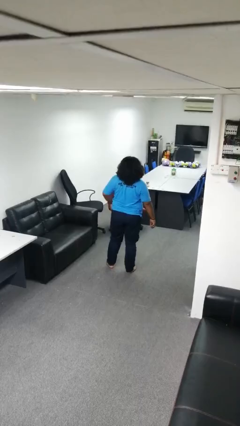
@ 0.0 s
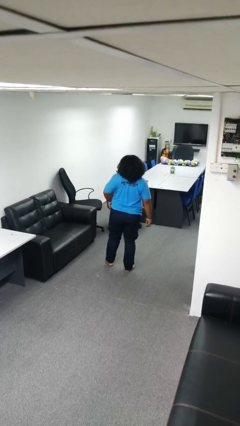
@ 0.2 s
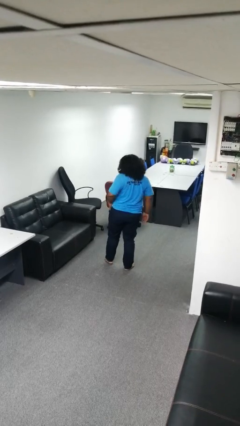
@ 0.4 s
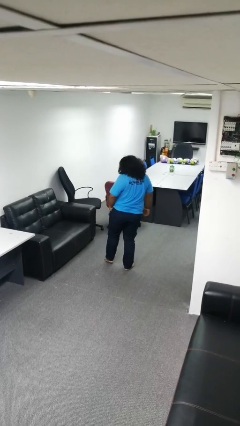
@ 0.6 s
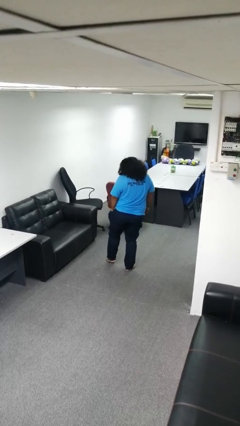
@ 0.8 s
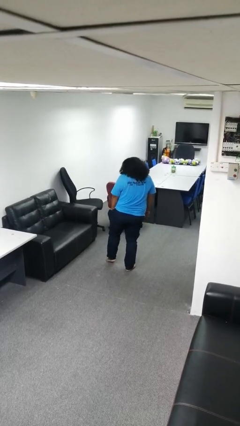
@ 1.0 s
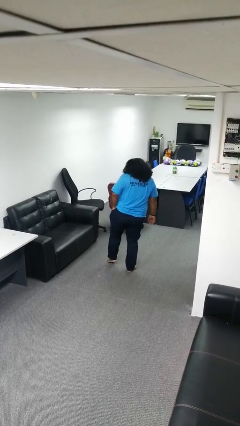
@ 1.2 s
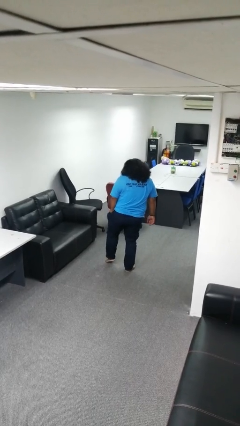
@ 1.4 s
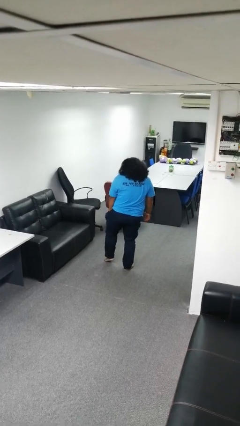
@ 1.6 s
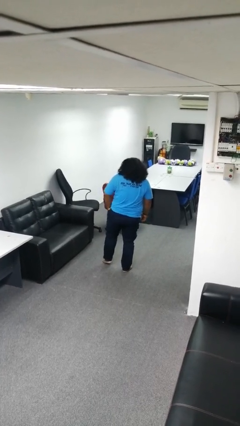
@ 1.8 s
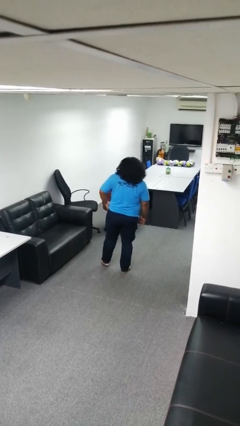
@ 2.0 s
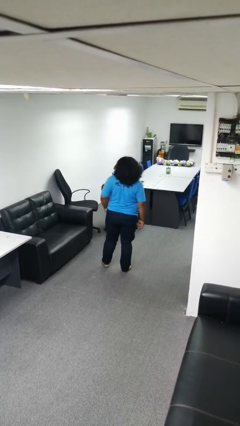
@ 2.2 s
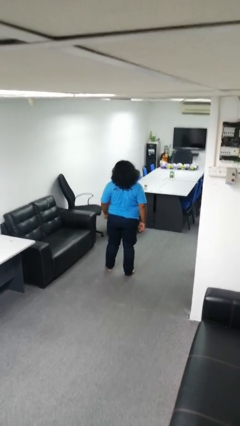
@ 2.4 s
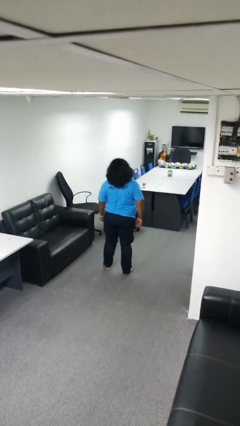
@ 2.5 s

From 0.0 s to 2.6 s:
person puts hands in back pockets

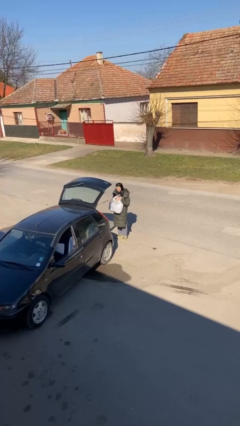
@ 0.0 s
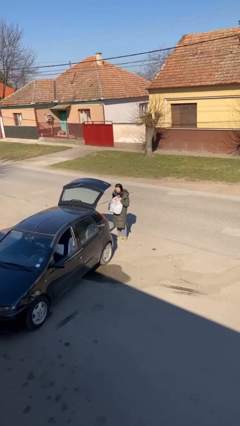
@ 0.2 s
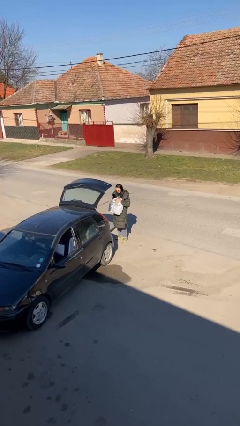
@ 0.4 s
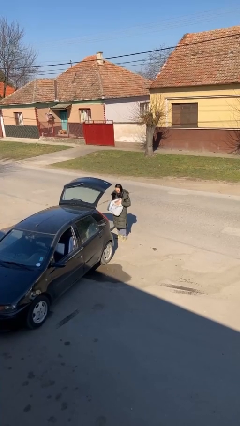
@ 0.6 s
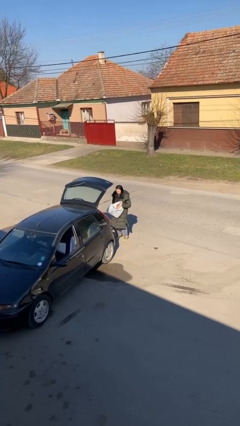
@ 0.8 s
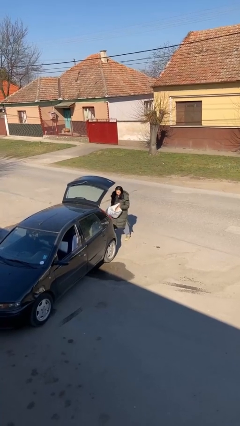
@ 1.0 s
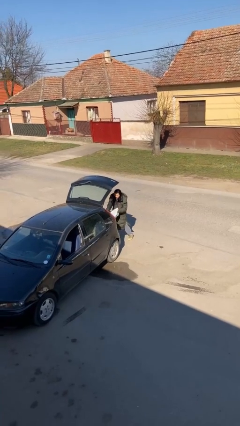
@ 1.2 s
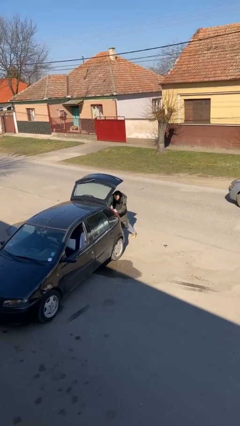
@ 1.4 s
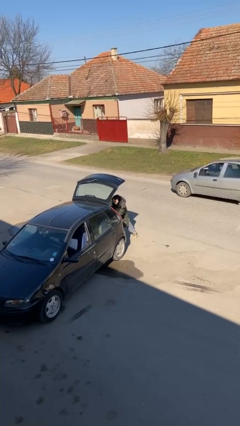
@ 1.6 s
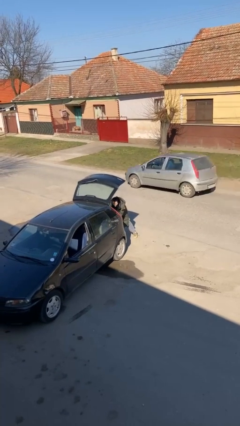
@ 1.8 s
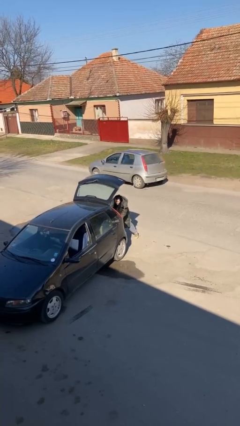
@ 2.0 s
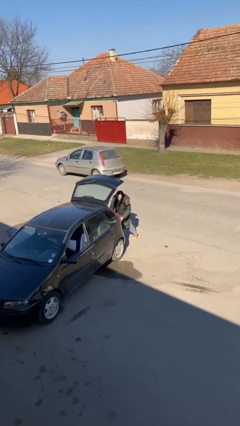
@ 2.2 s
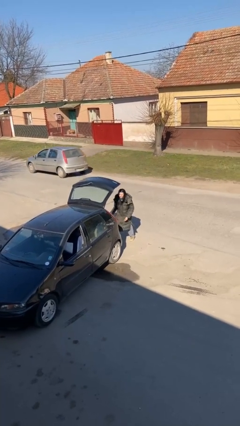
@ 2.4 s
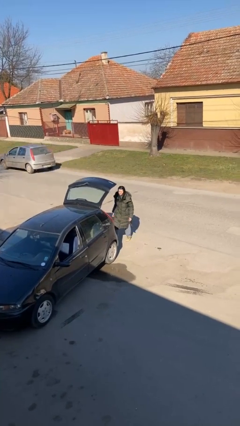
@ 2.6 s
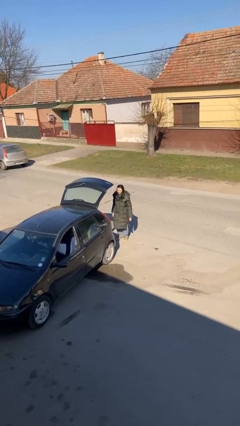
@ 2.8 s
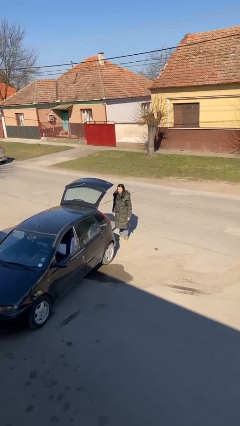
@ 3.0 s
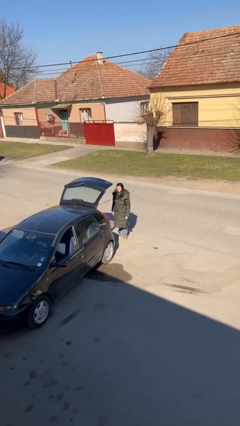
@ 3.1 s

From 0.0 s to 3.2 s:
person loads car

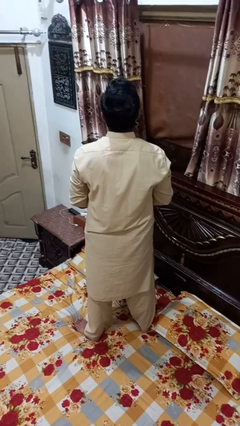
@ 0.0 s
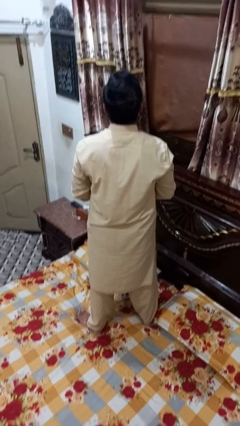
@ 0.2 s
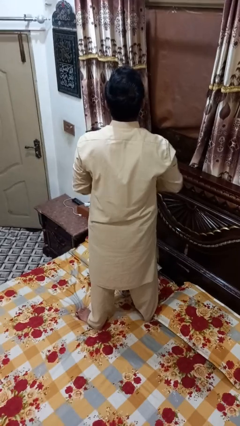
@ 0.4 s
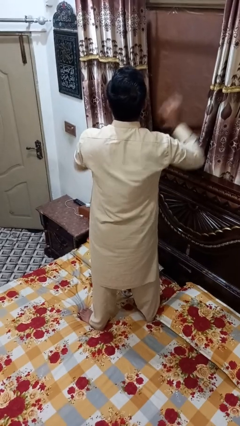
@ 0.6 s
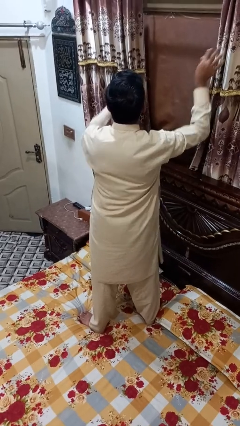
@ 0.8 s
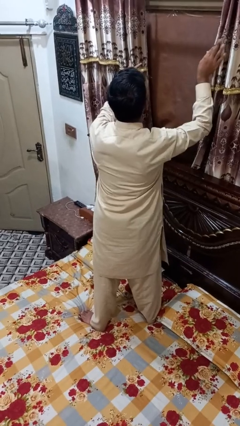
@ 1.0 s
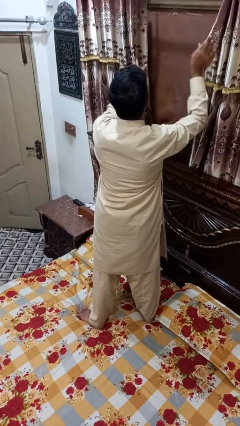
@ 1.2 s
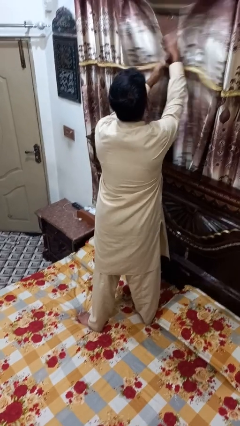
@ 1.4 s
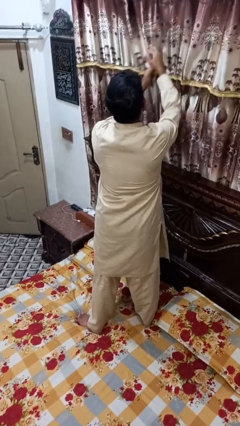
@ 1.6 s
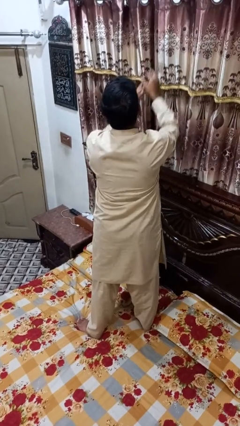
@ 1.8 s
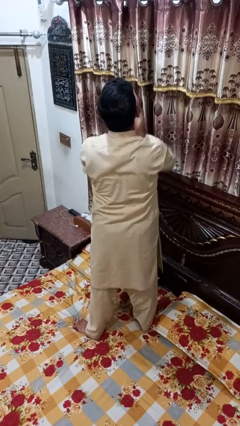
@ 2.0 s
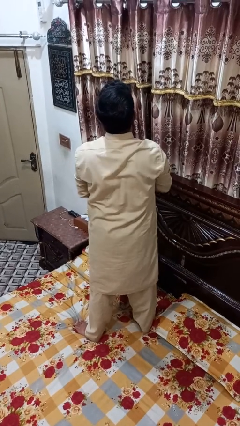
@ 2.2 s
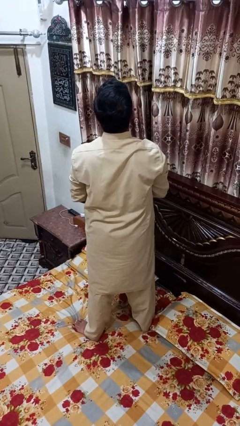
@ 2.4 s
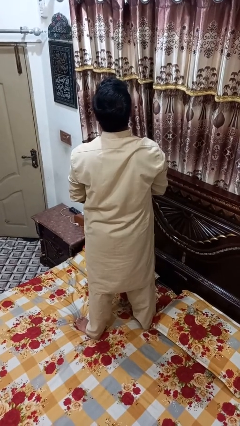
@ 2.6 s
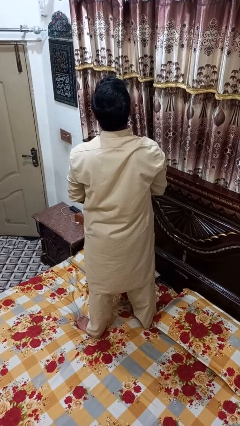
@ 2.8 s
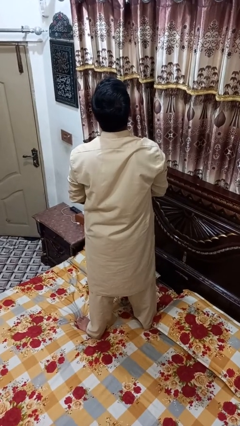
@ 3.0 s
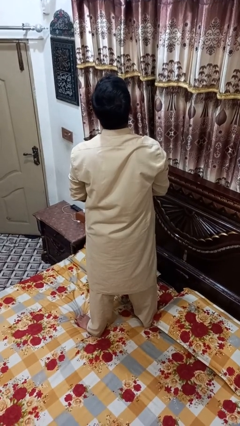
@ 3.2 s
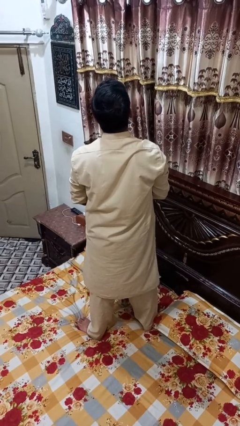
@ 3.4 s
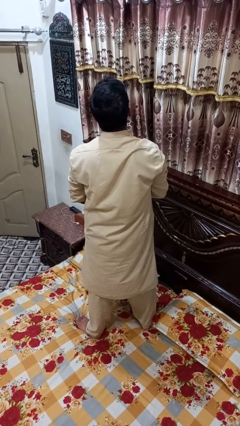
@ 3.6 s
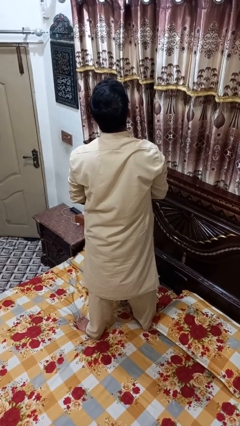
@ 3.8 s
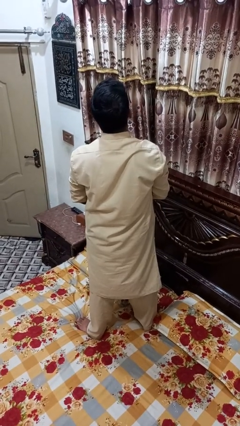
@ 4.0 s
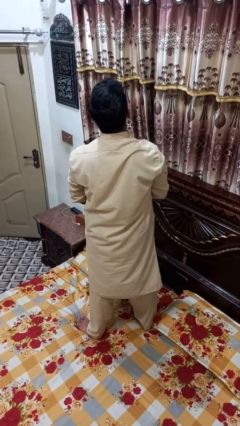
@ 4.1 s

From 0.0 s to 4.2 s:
person closes curtains

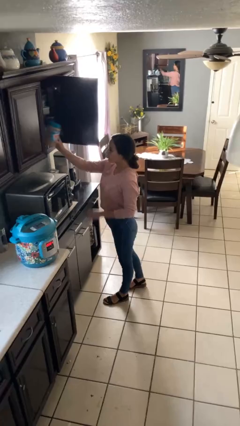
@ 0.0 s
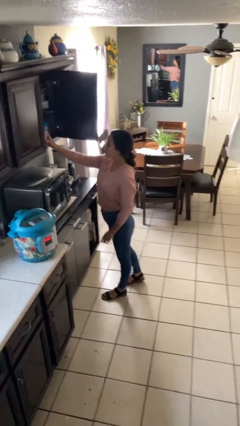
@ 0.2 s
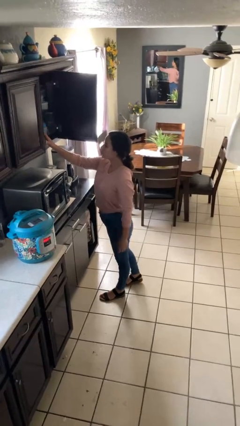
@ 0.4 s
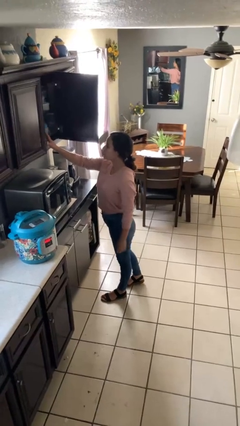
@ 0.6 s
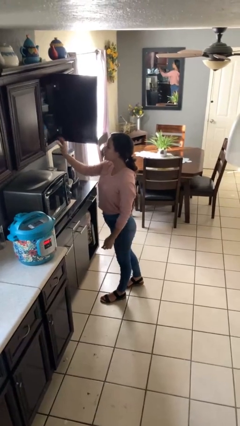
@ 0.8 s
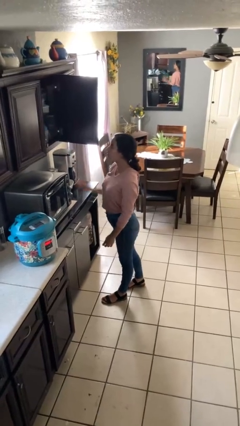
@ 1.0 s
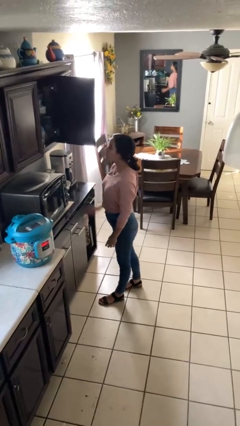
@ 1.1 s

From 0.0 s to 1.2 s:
person puts down object into cabinet

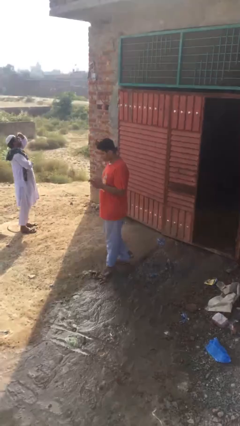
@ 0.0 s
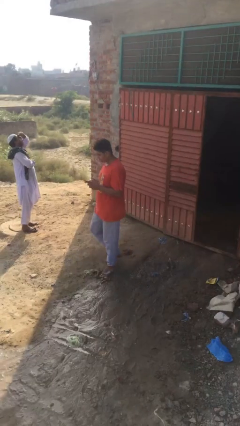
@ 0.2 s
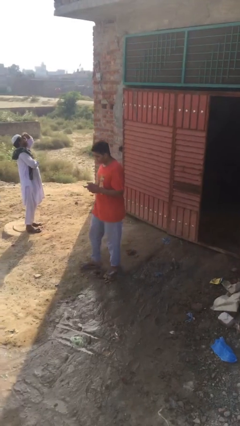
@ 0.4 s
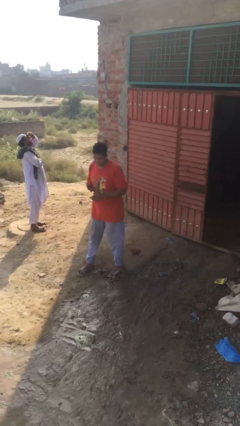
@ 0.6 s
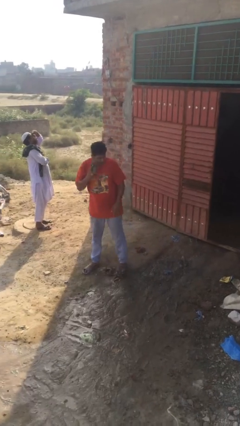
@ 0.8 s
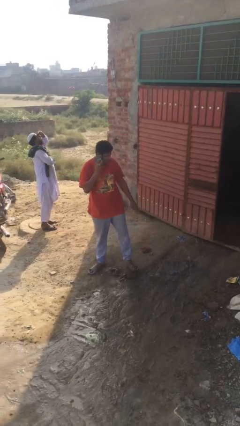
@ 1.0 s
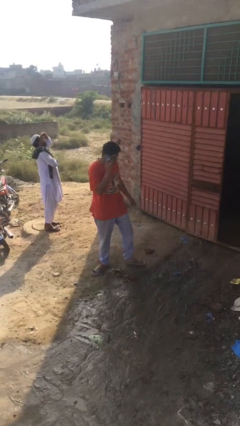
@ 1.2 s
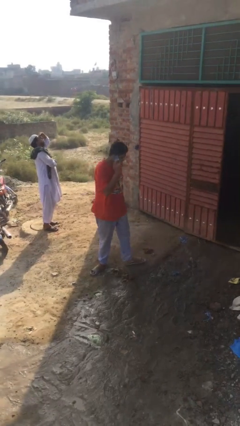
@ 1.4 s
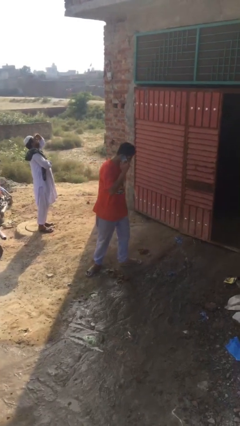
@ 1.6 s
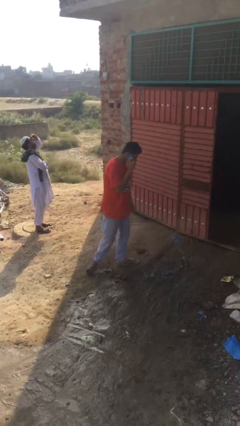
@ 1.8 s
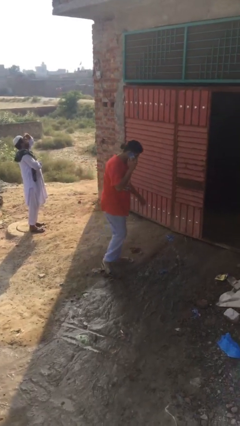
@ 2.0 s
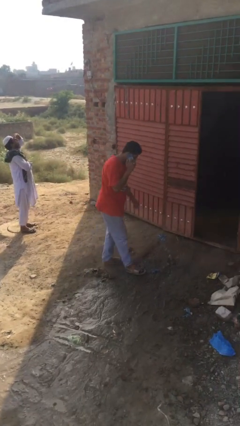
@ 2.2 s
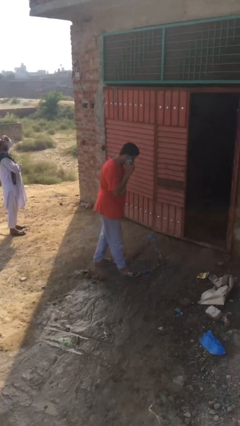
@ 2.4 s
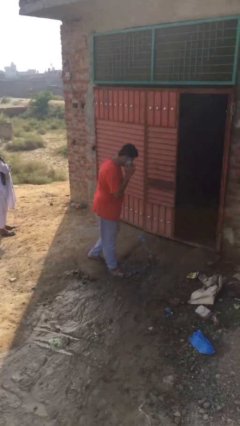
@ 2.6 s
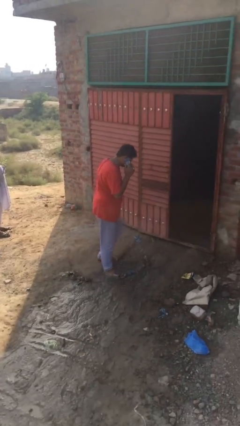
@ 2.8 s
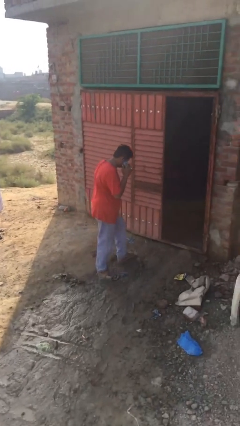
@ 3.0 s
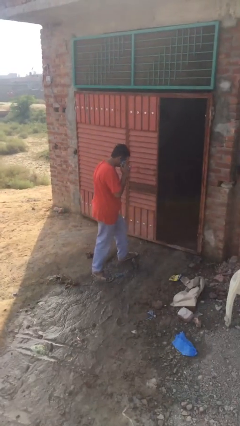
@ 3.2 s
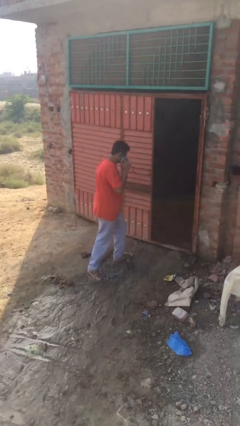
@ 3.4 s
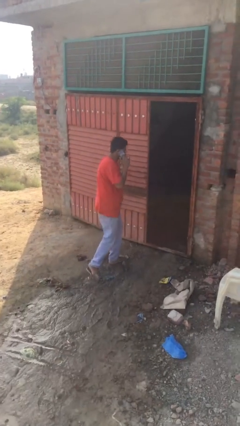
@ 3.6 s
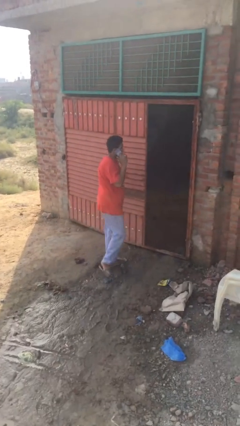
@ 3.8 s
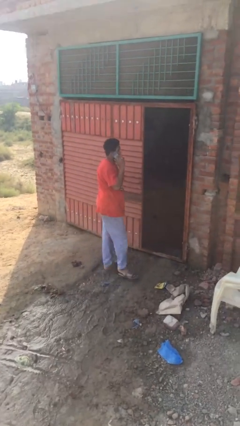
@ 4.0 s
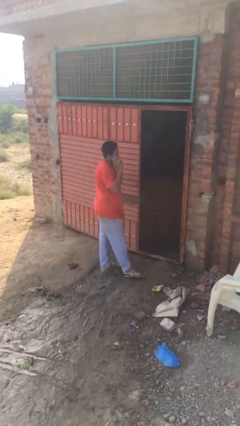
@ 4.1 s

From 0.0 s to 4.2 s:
person talks on phone

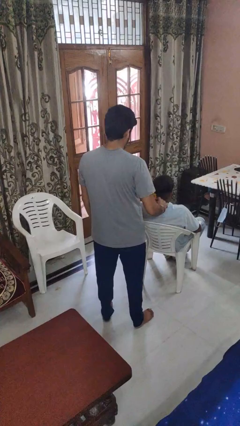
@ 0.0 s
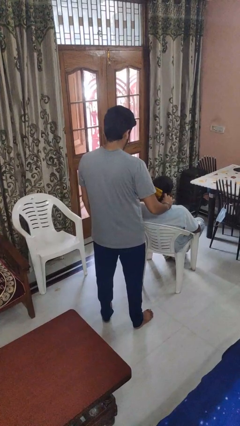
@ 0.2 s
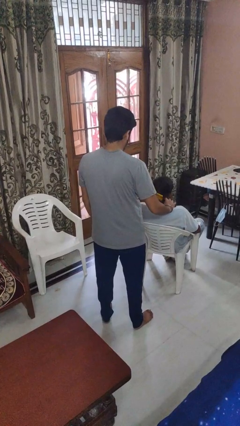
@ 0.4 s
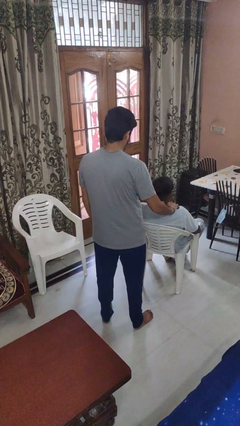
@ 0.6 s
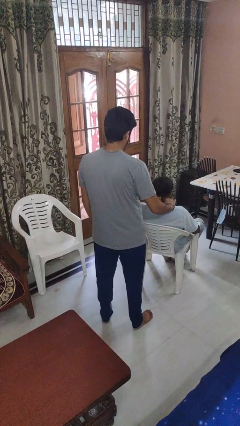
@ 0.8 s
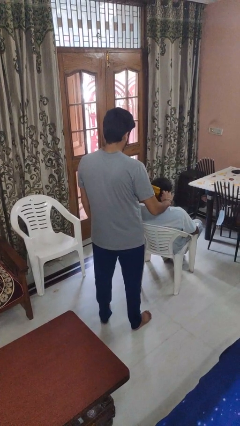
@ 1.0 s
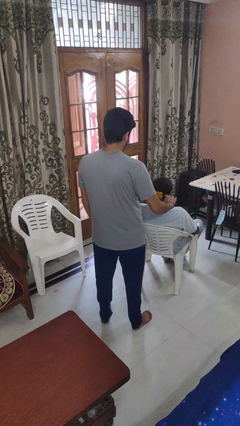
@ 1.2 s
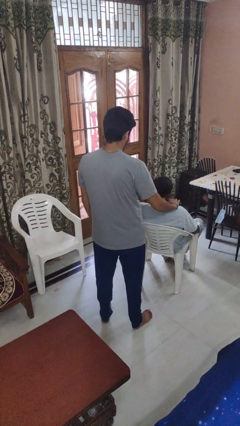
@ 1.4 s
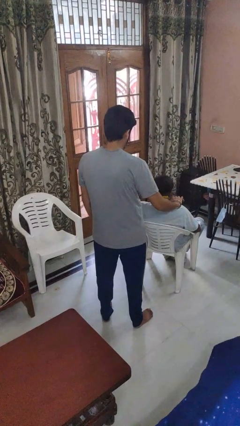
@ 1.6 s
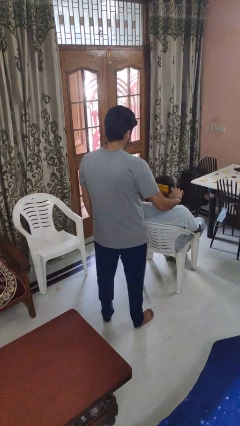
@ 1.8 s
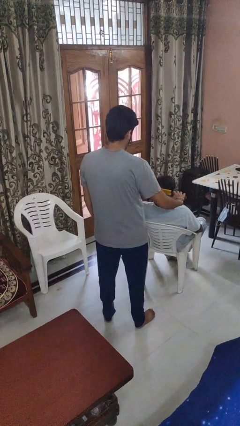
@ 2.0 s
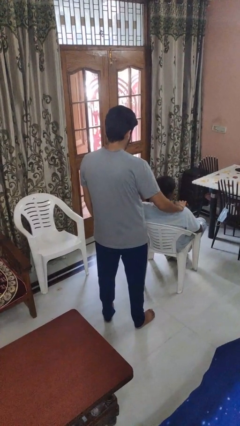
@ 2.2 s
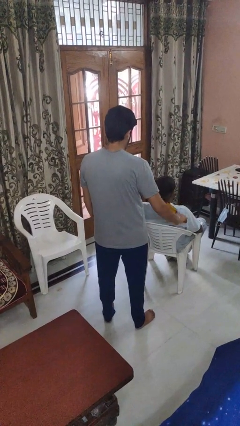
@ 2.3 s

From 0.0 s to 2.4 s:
person brushes hair of person
